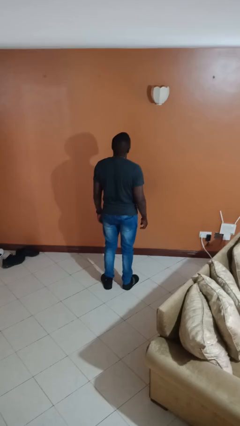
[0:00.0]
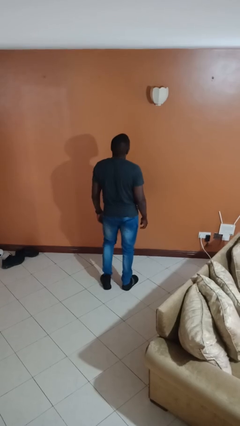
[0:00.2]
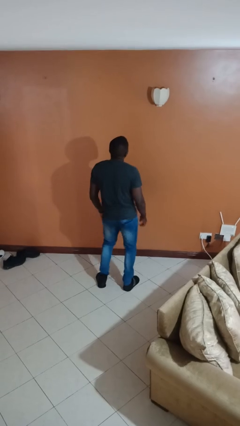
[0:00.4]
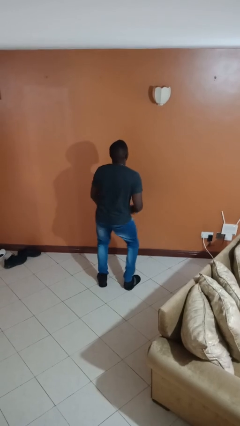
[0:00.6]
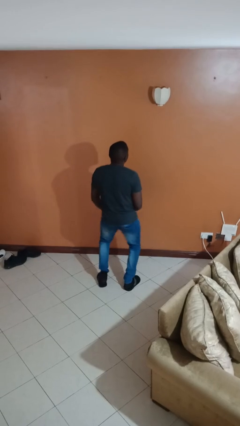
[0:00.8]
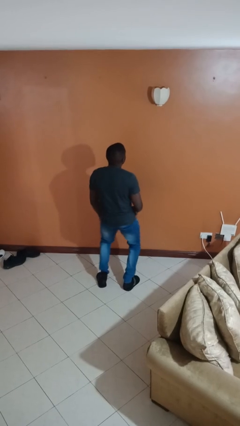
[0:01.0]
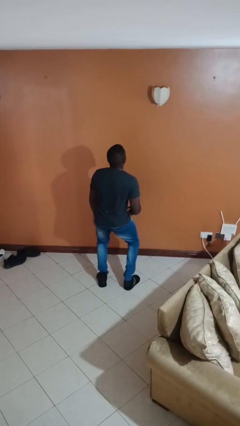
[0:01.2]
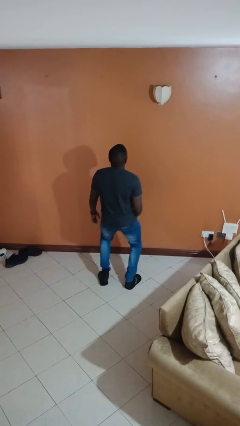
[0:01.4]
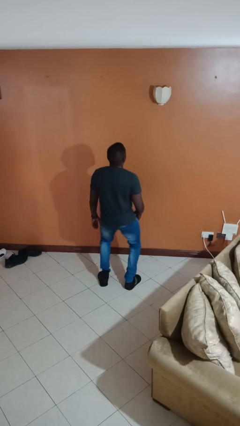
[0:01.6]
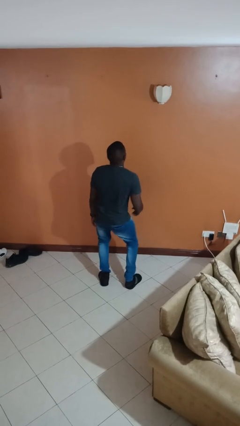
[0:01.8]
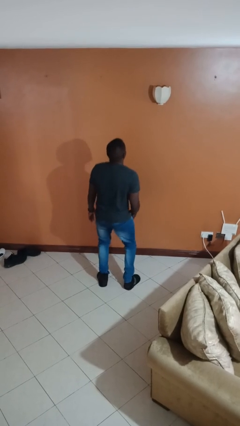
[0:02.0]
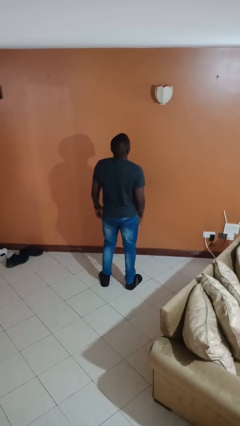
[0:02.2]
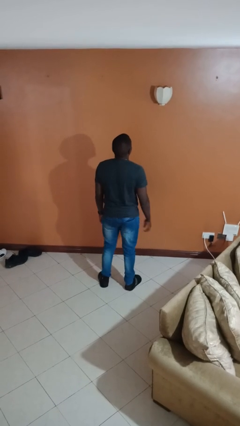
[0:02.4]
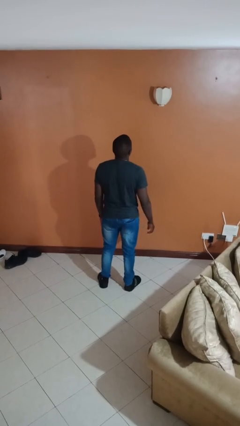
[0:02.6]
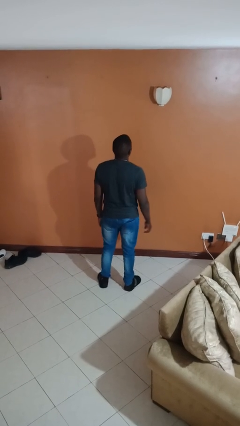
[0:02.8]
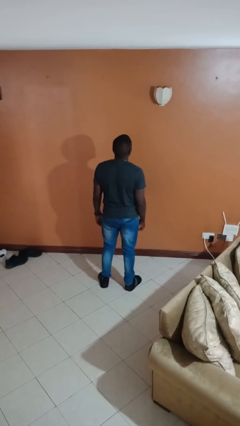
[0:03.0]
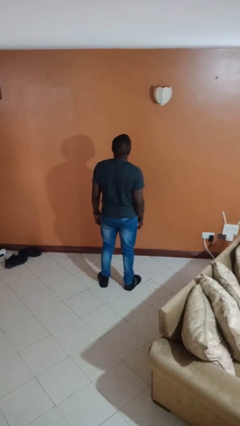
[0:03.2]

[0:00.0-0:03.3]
person wiggles hips

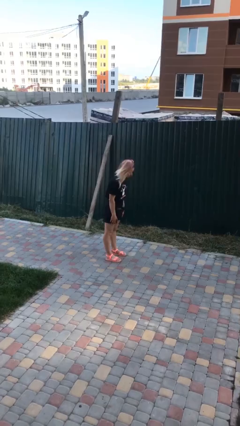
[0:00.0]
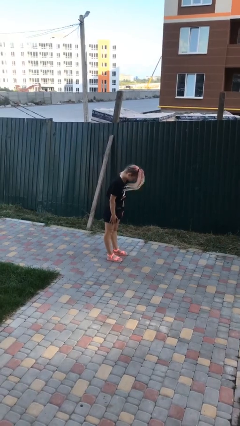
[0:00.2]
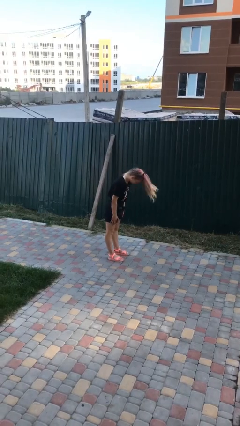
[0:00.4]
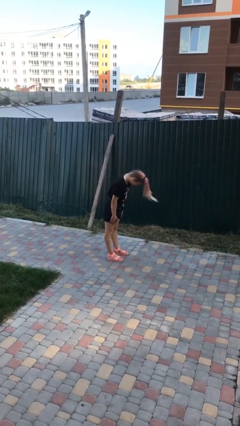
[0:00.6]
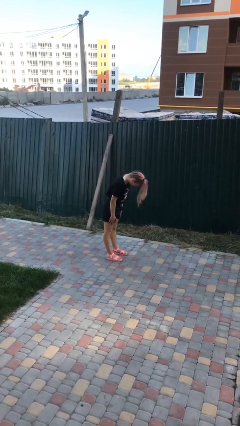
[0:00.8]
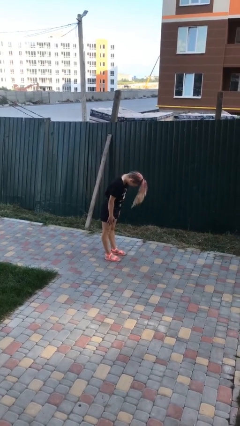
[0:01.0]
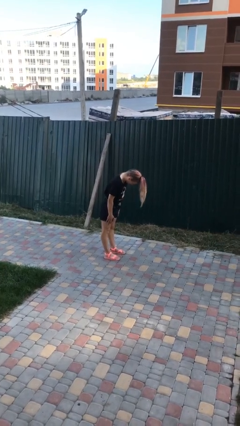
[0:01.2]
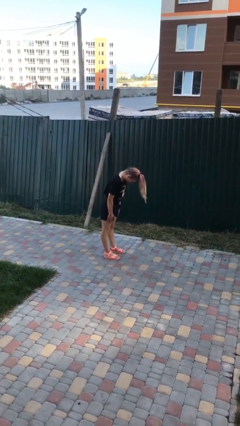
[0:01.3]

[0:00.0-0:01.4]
person bows

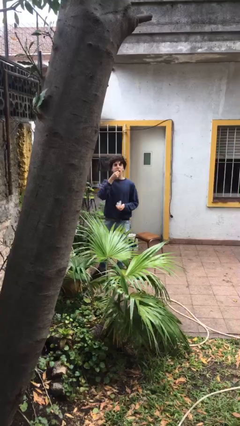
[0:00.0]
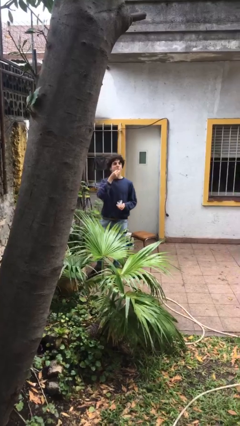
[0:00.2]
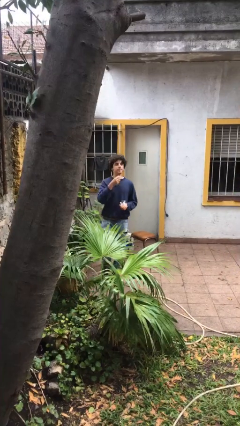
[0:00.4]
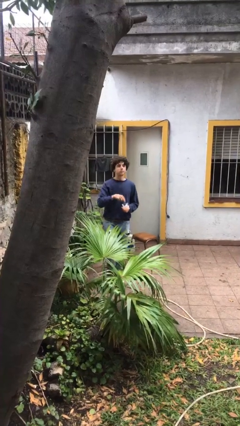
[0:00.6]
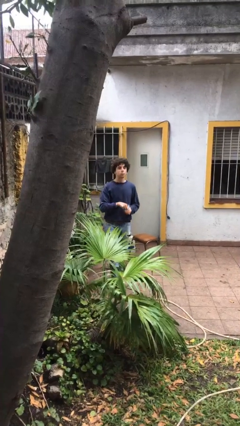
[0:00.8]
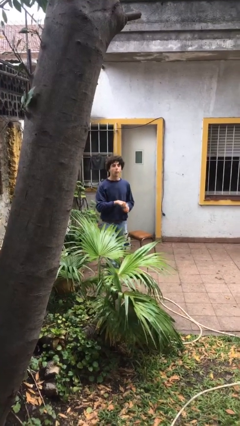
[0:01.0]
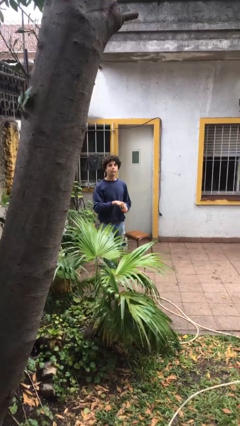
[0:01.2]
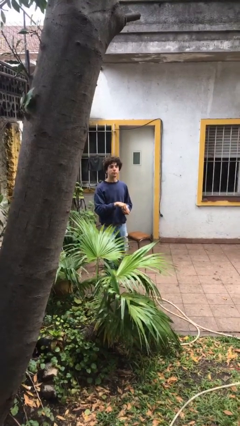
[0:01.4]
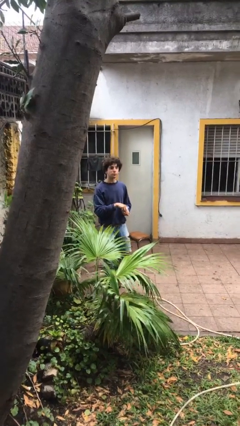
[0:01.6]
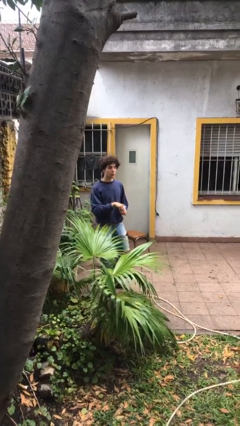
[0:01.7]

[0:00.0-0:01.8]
person eats snack from bag

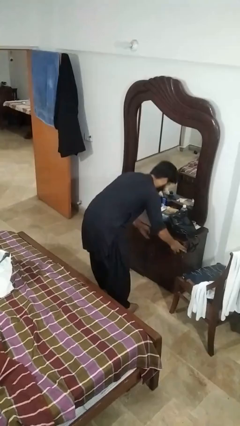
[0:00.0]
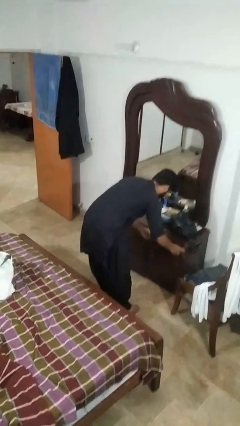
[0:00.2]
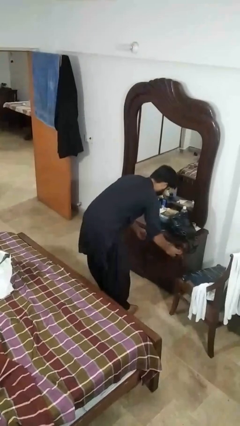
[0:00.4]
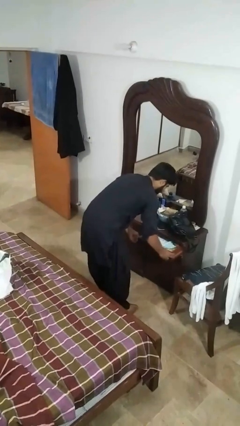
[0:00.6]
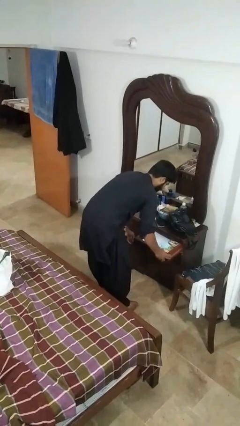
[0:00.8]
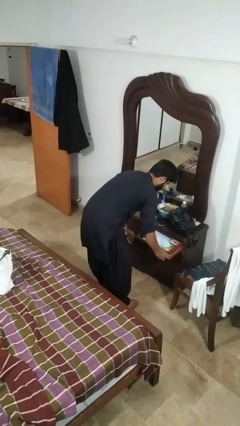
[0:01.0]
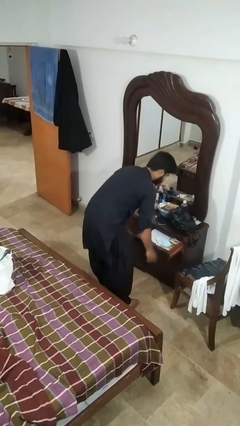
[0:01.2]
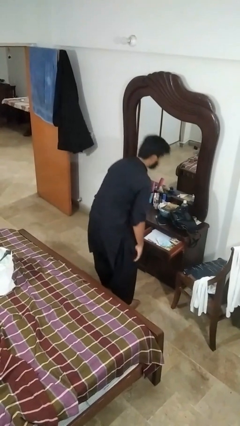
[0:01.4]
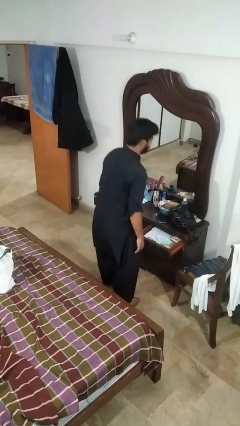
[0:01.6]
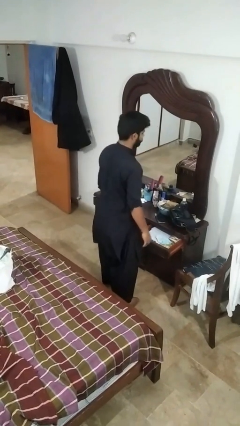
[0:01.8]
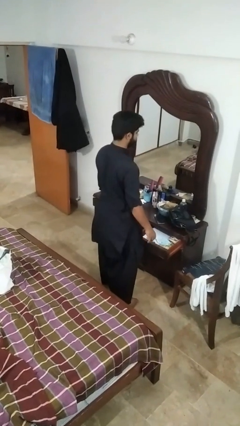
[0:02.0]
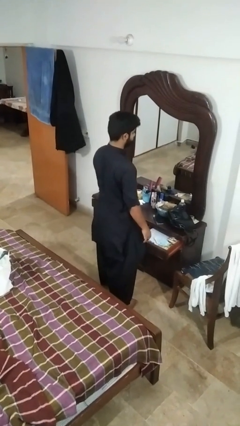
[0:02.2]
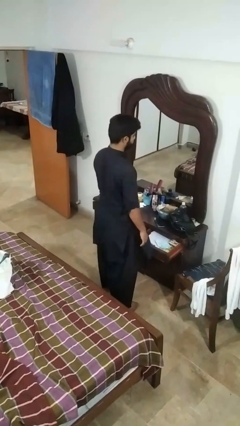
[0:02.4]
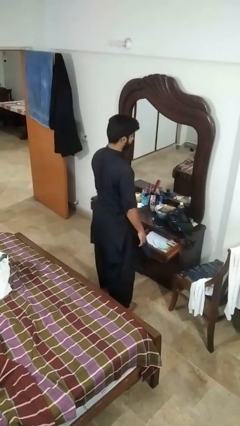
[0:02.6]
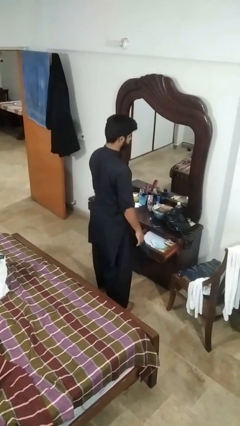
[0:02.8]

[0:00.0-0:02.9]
person opens dresser drawer

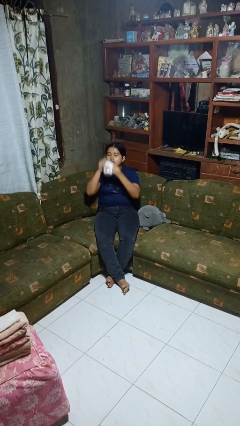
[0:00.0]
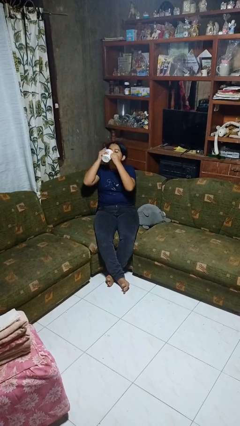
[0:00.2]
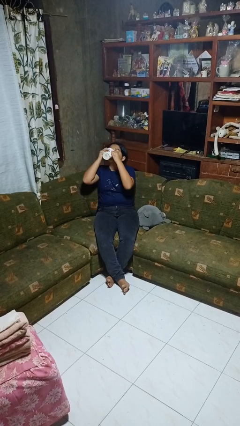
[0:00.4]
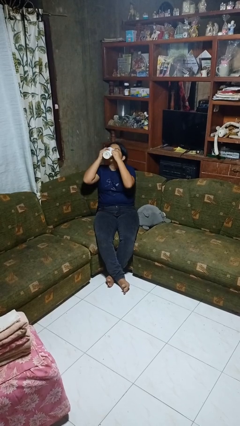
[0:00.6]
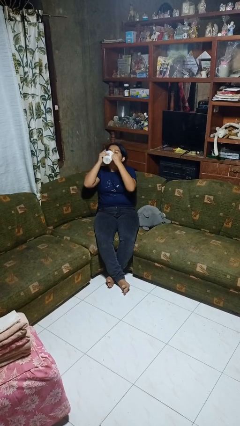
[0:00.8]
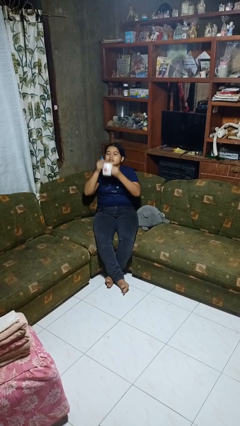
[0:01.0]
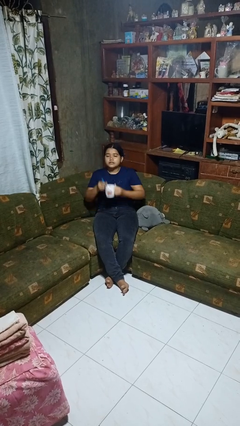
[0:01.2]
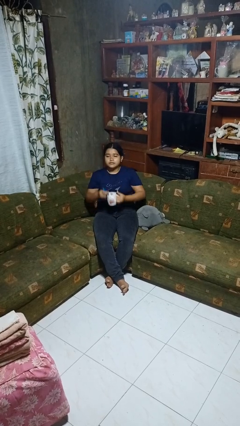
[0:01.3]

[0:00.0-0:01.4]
person drinks from mug

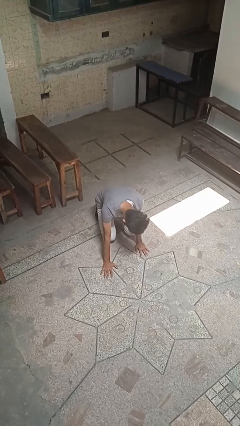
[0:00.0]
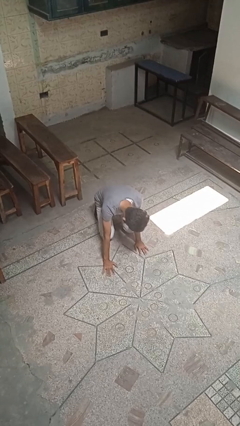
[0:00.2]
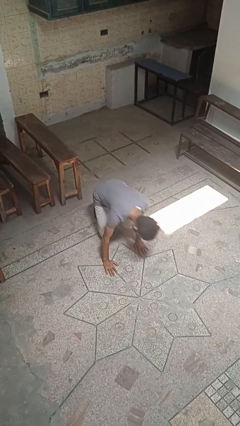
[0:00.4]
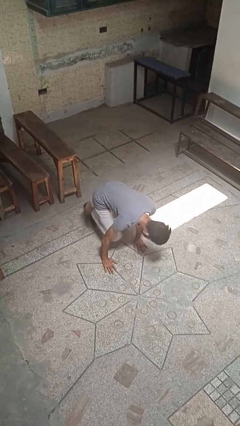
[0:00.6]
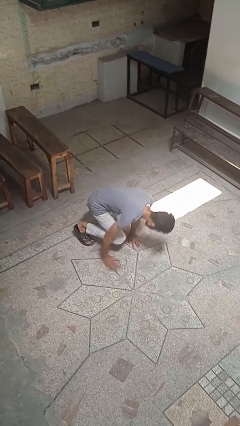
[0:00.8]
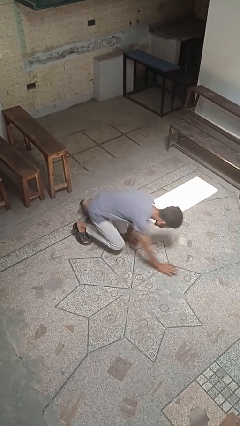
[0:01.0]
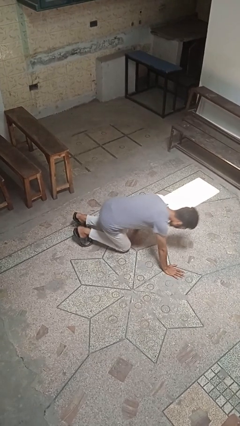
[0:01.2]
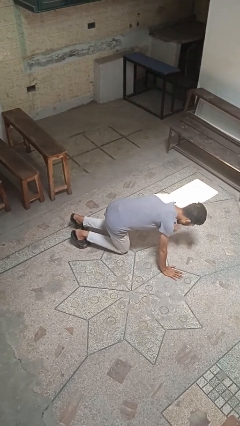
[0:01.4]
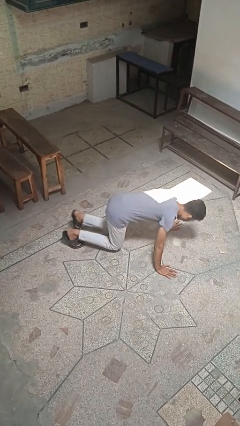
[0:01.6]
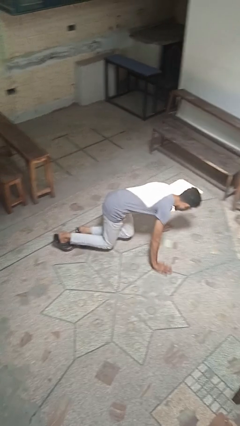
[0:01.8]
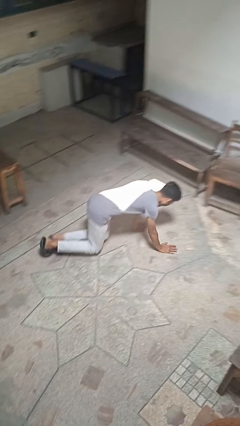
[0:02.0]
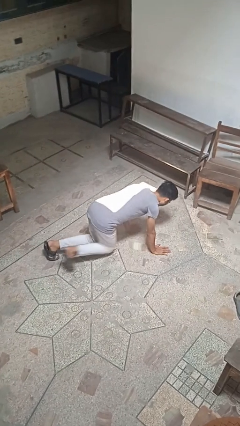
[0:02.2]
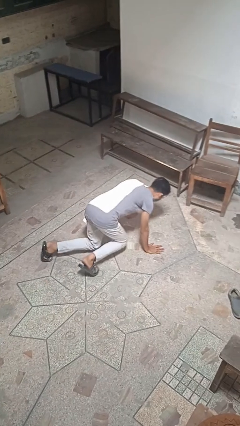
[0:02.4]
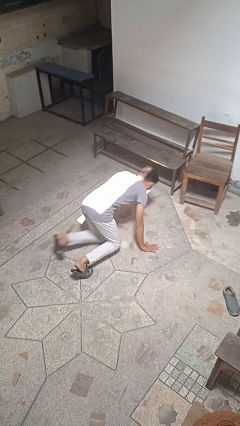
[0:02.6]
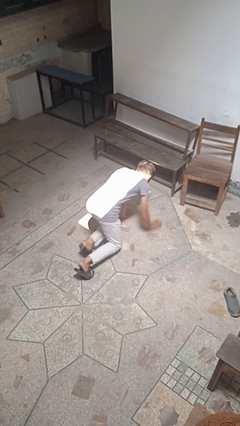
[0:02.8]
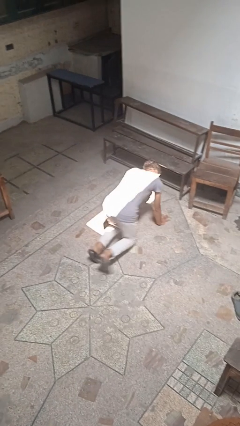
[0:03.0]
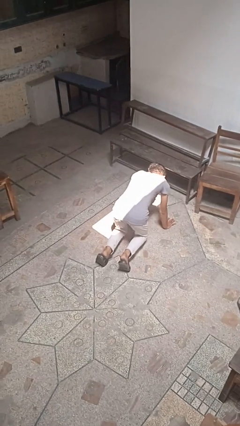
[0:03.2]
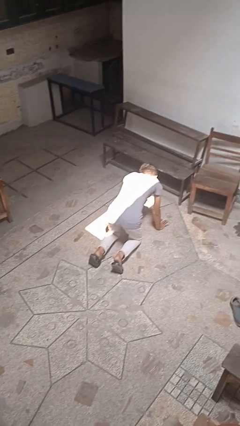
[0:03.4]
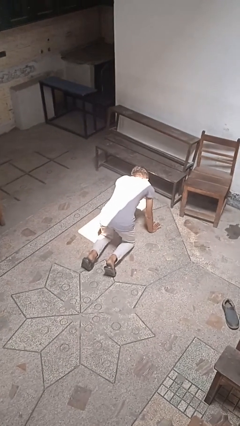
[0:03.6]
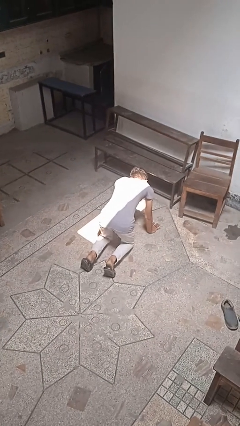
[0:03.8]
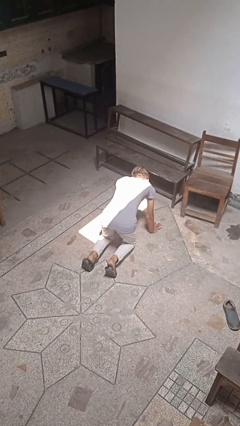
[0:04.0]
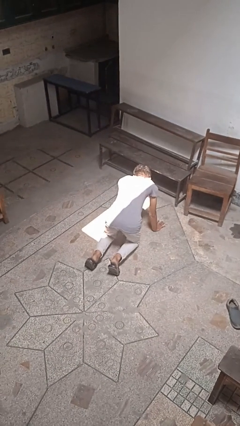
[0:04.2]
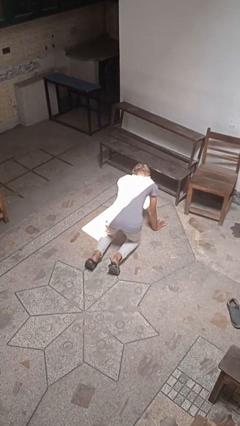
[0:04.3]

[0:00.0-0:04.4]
person crawls

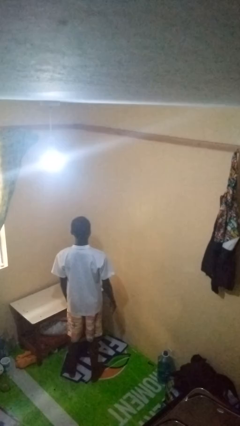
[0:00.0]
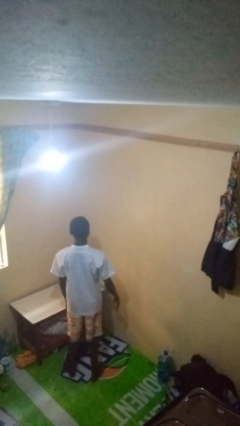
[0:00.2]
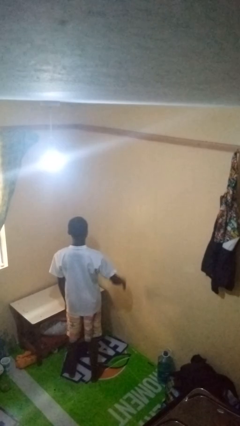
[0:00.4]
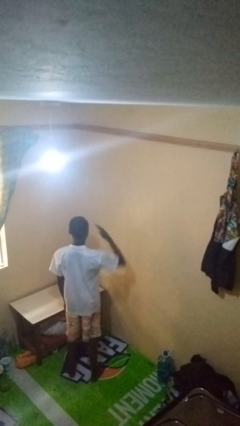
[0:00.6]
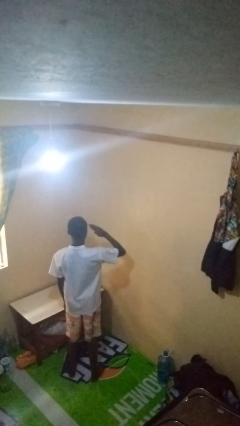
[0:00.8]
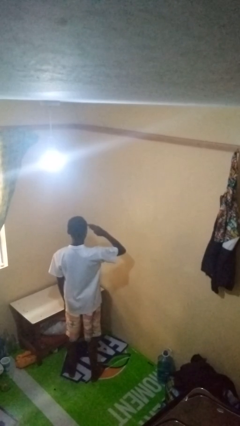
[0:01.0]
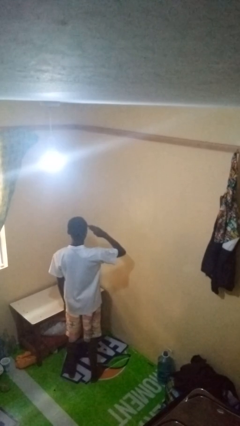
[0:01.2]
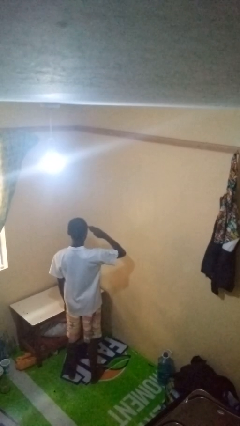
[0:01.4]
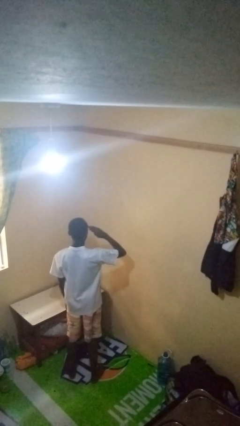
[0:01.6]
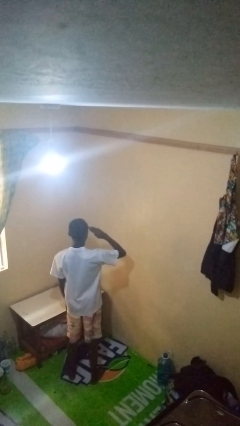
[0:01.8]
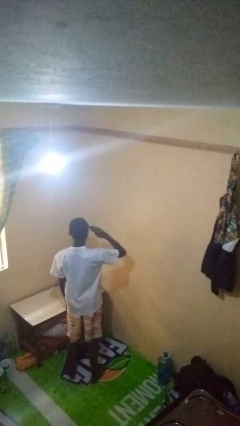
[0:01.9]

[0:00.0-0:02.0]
person salutes
